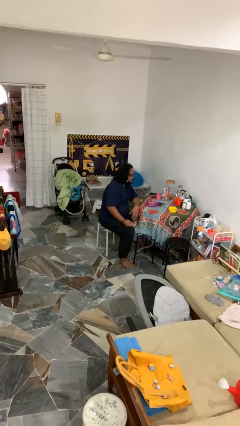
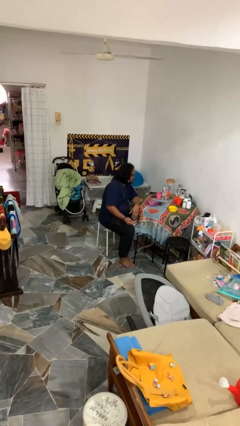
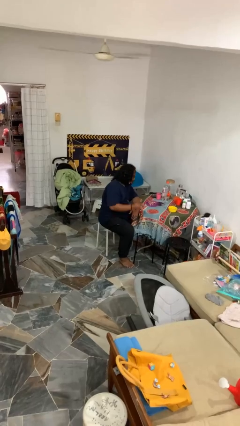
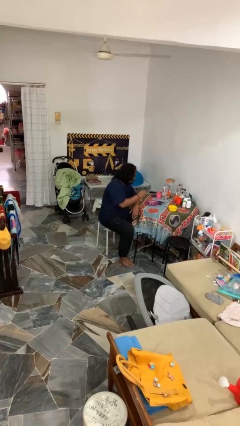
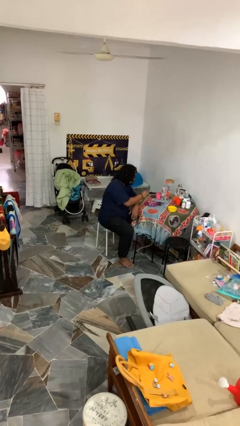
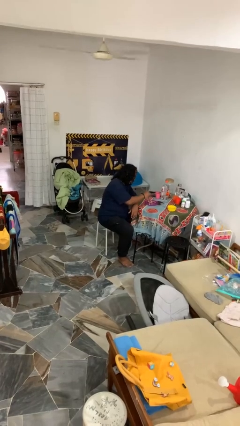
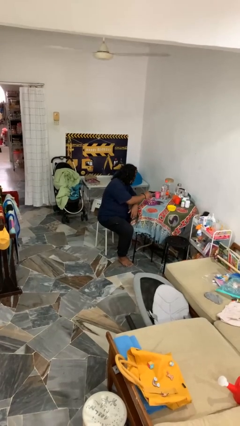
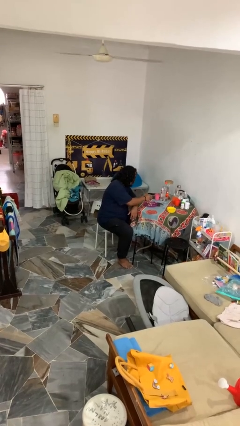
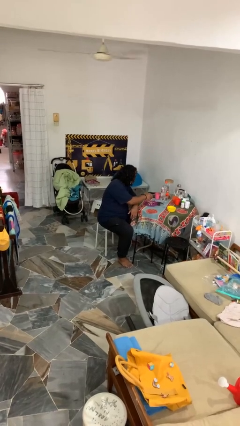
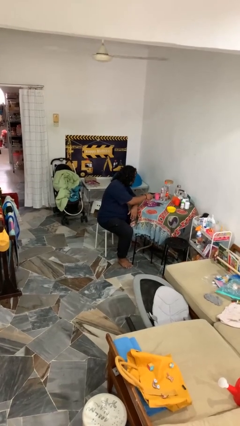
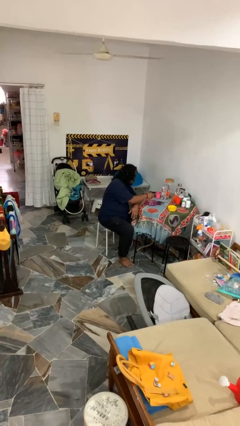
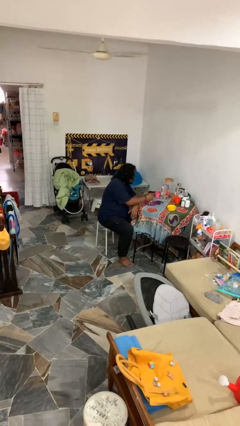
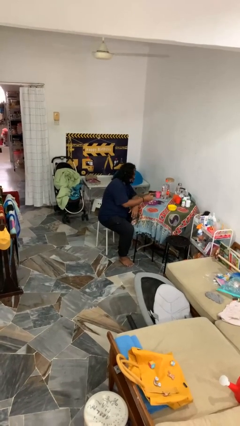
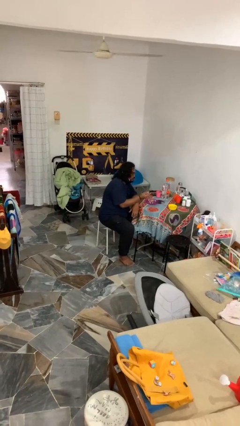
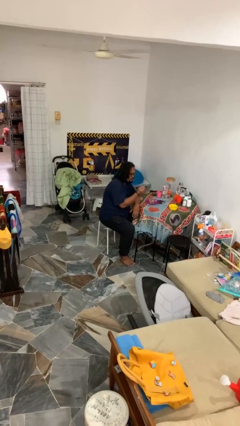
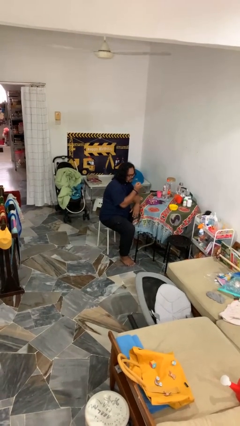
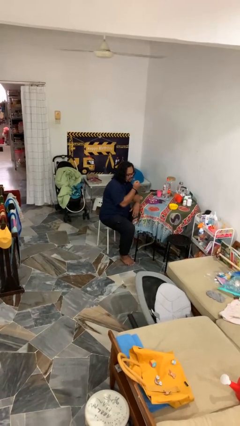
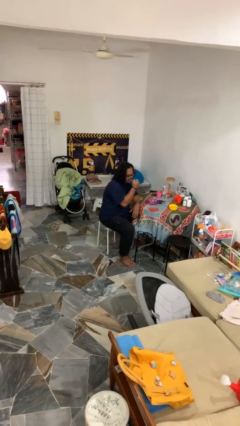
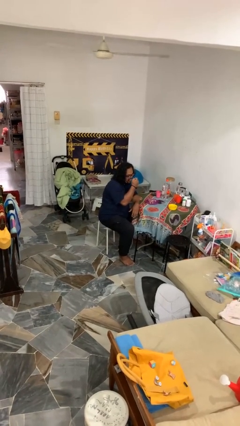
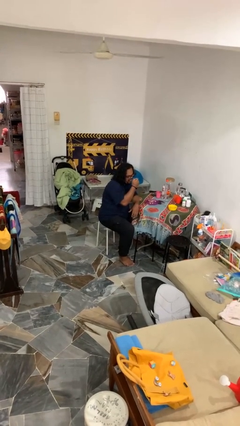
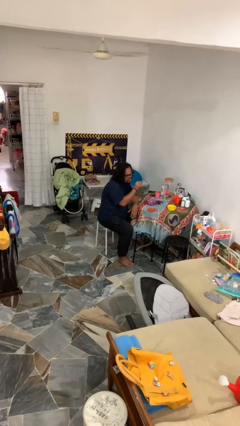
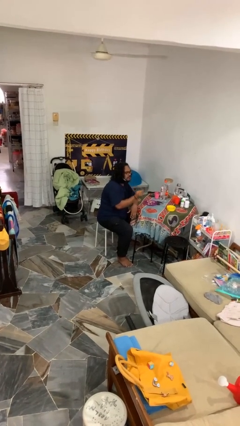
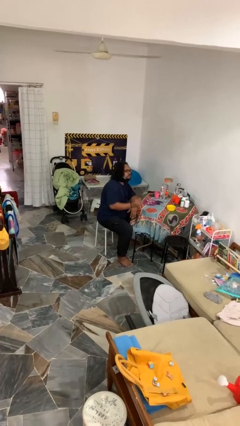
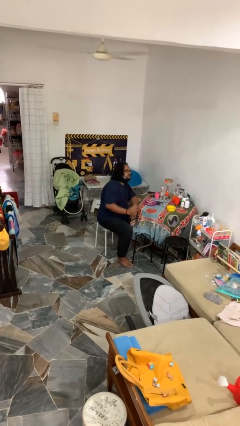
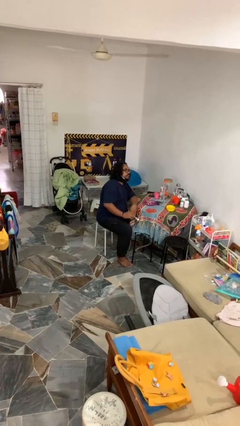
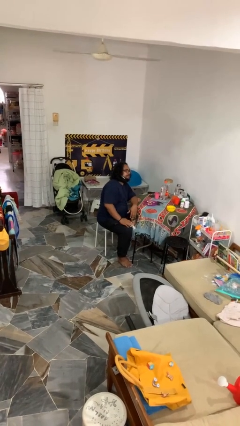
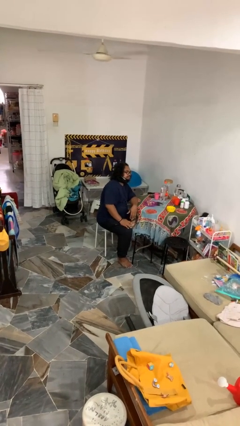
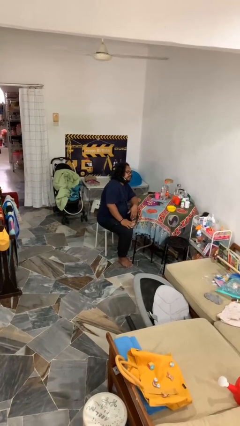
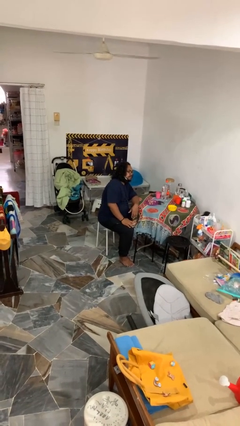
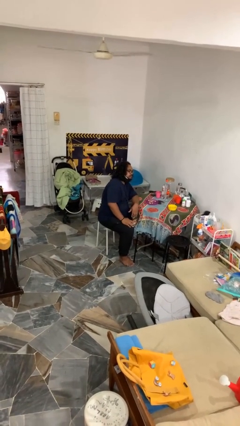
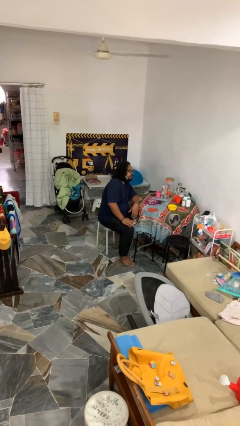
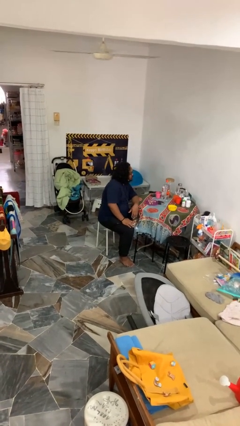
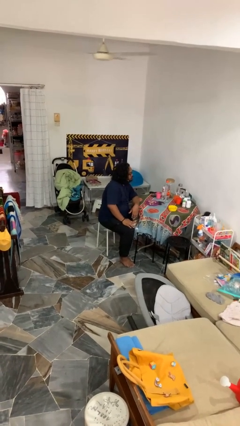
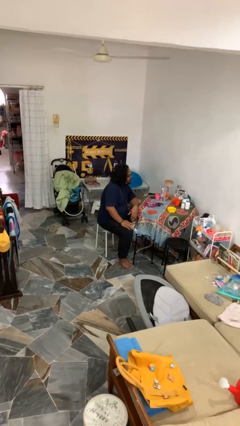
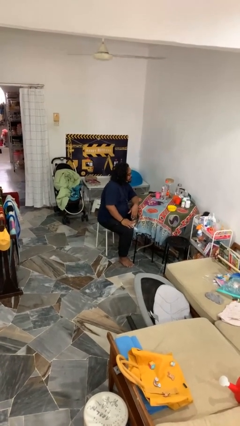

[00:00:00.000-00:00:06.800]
person eats with utensil

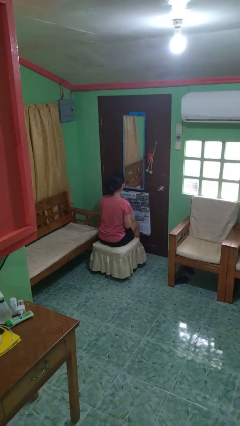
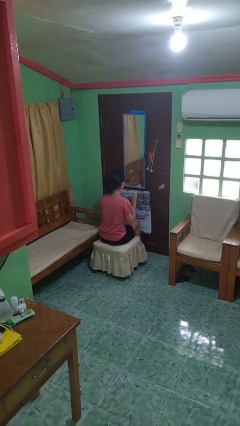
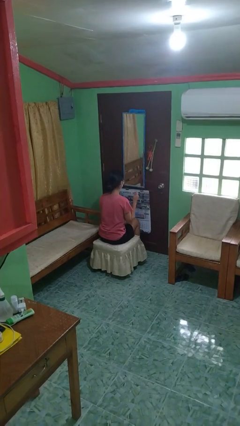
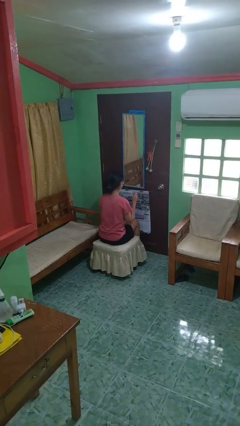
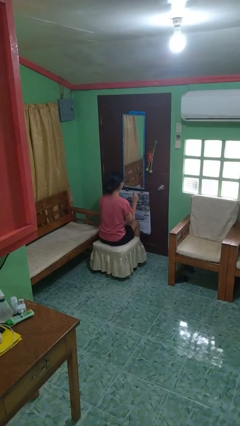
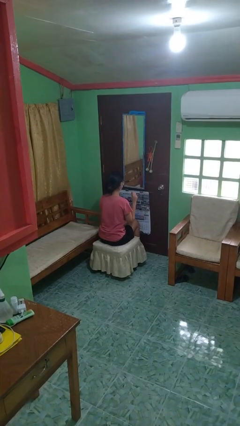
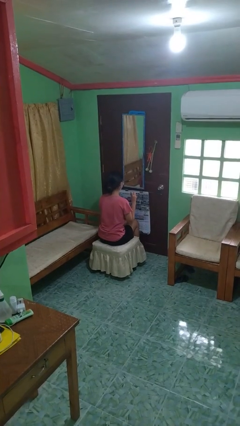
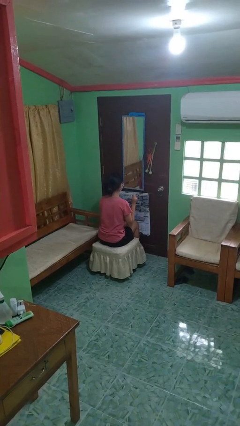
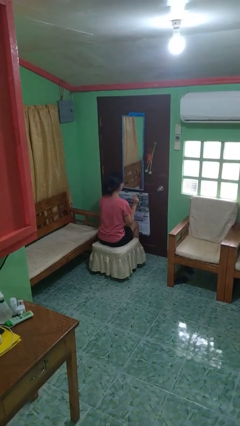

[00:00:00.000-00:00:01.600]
person snaps fingers

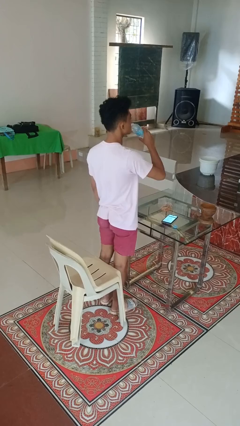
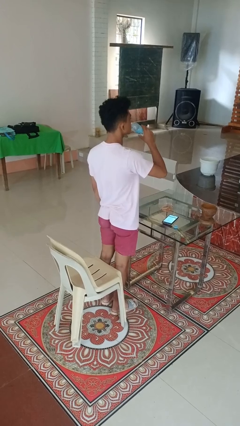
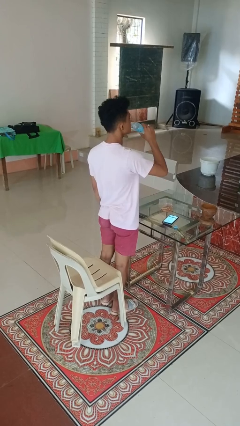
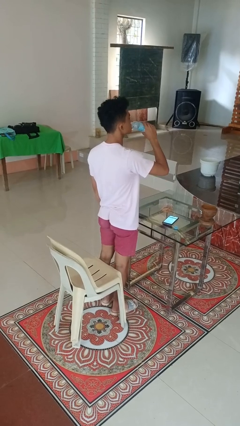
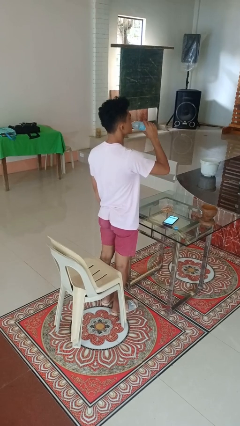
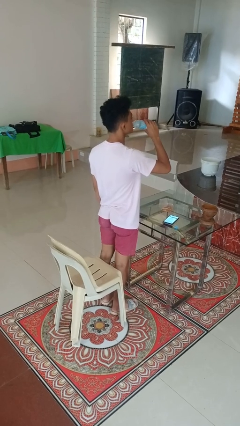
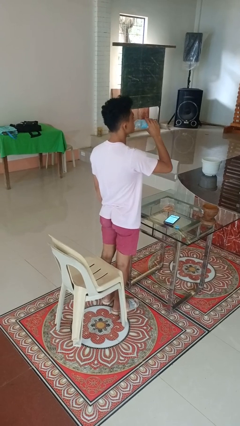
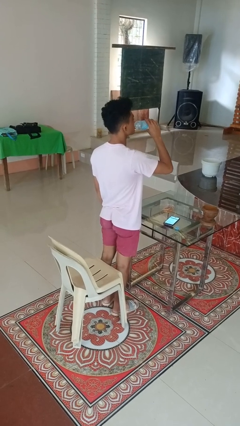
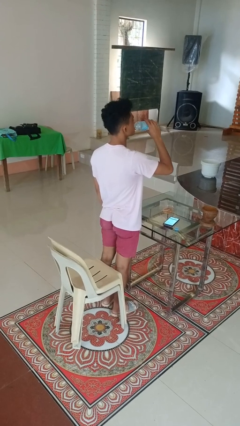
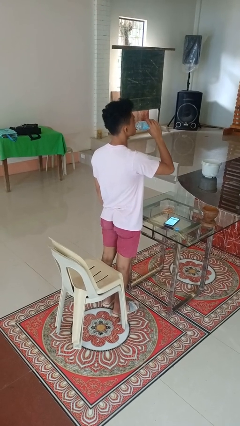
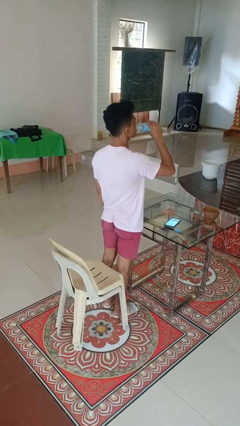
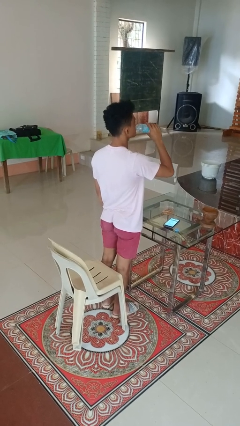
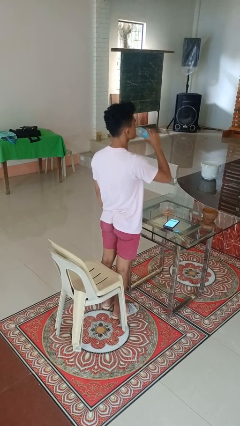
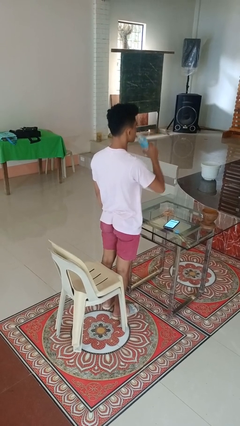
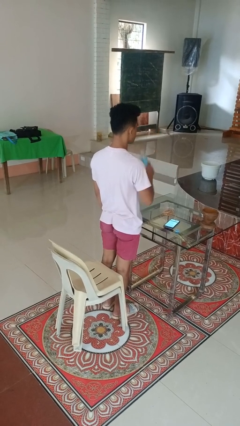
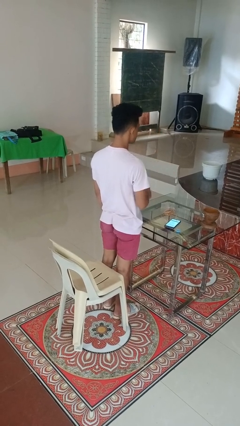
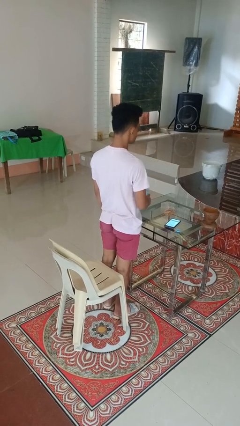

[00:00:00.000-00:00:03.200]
person drinks from bottle

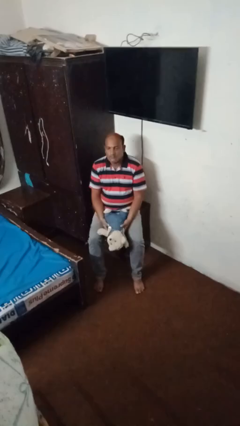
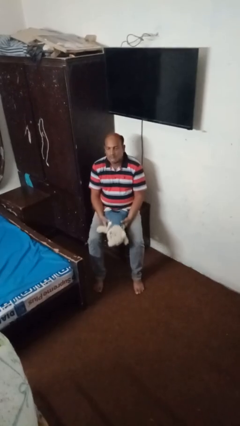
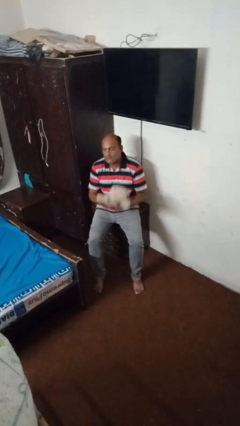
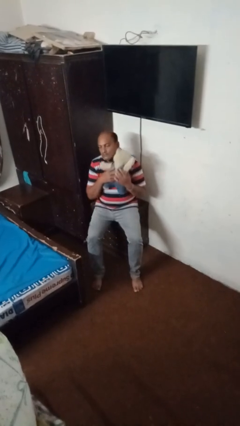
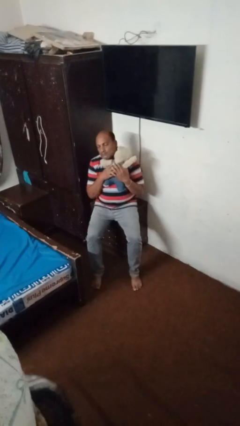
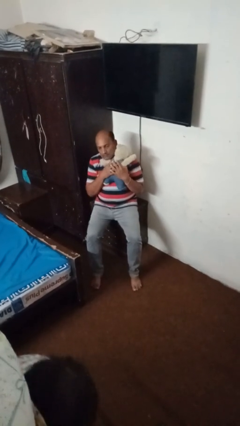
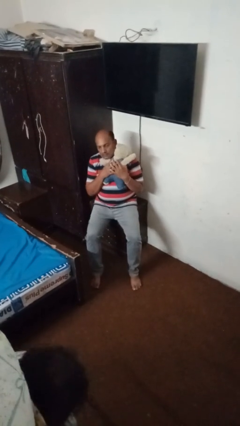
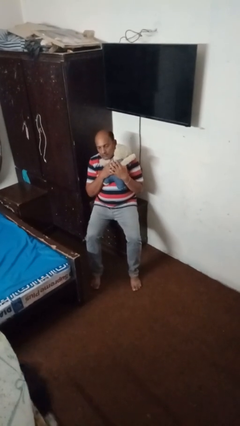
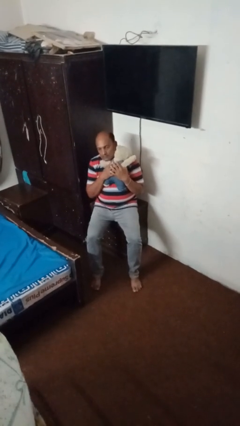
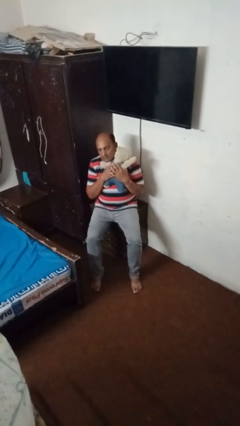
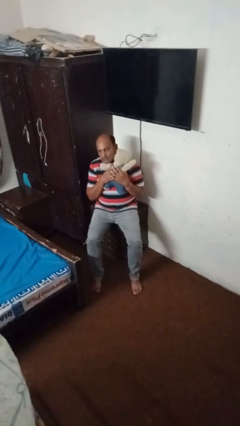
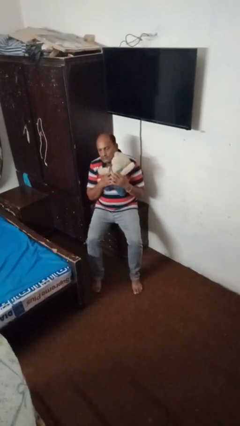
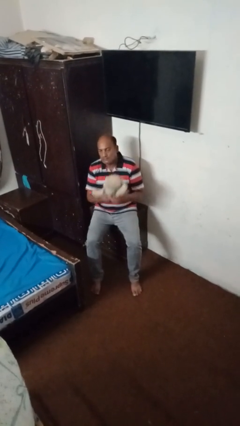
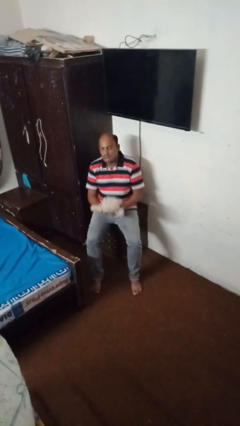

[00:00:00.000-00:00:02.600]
person hugs stuffed animal

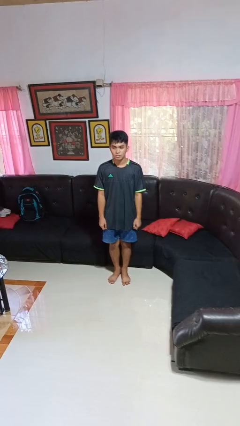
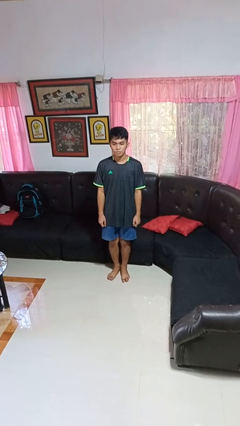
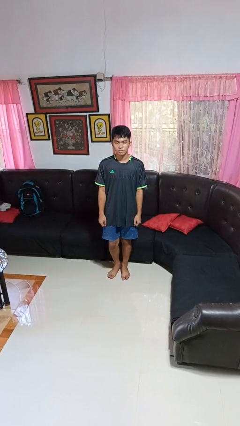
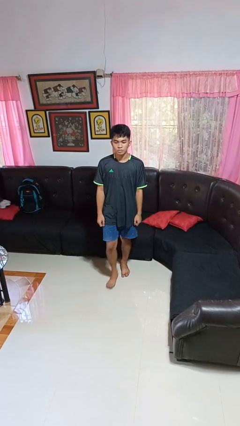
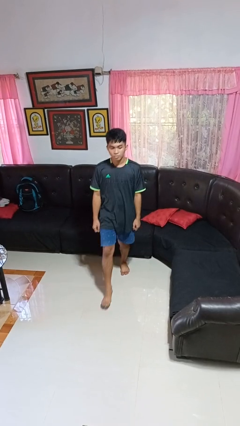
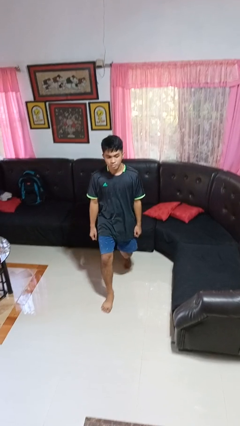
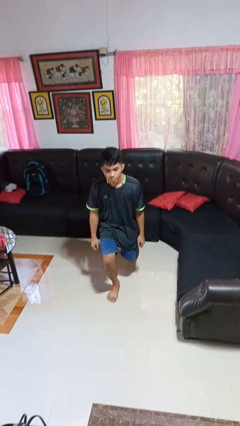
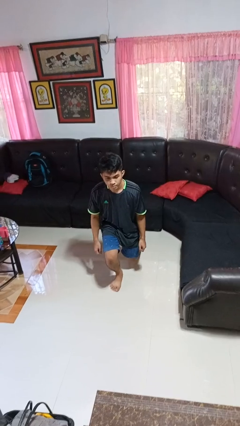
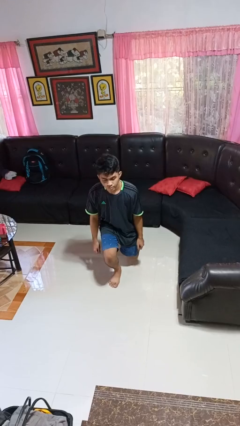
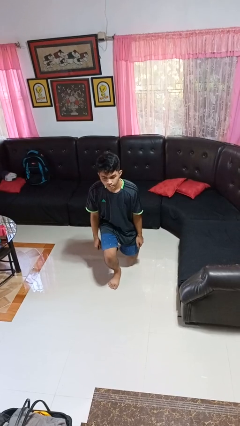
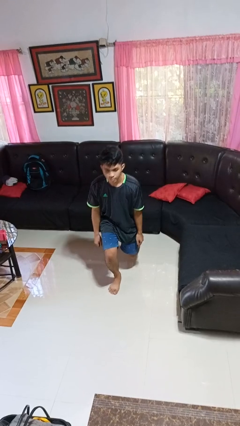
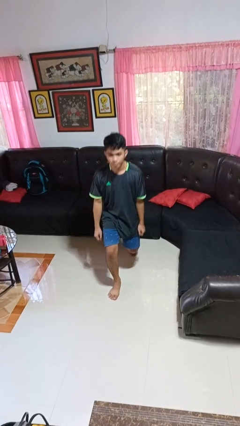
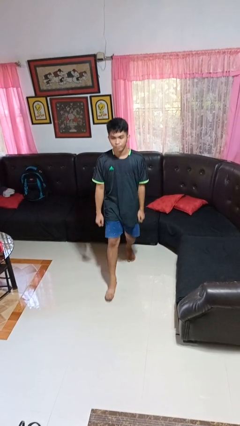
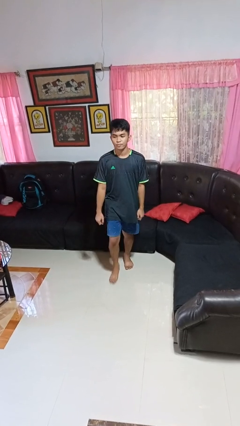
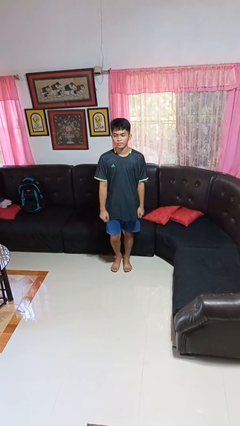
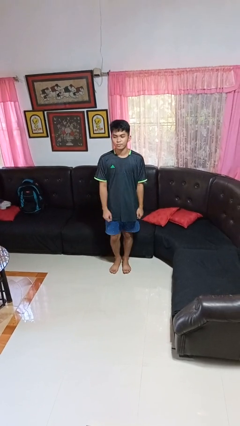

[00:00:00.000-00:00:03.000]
person exercises with lunges
